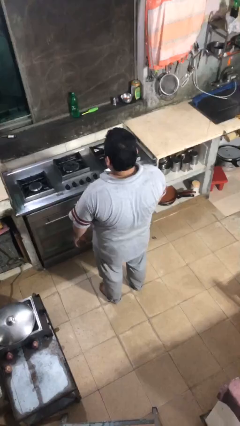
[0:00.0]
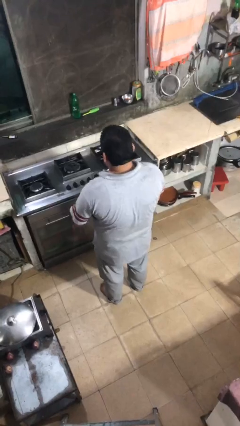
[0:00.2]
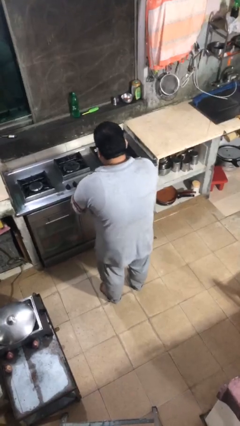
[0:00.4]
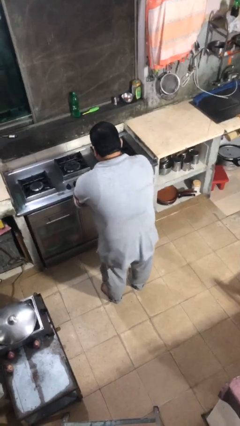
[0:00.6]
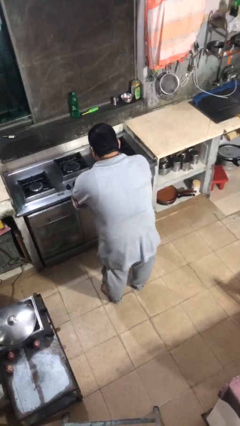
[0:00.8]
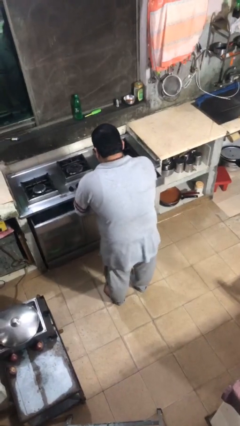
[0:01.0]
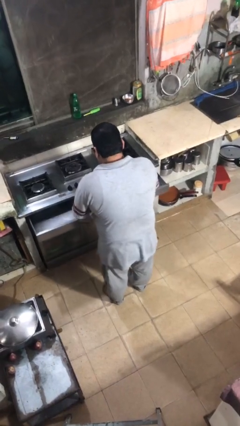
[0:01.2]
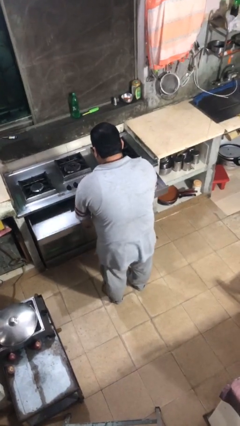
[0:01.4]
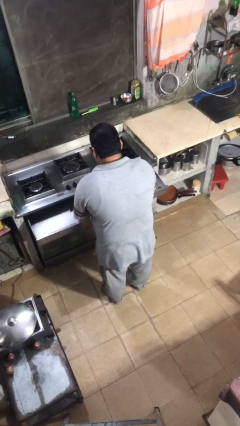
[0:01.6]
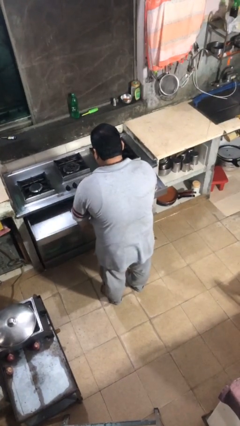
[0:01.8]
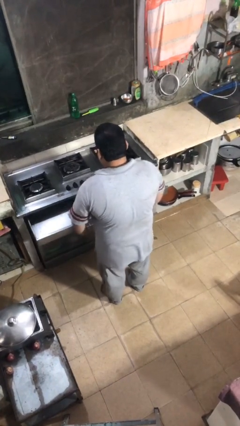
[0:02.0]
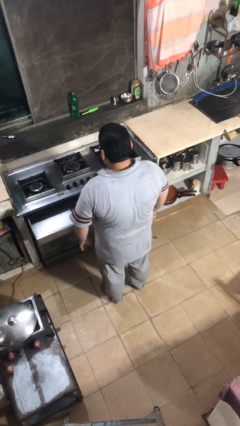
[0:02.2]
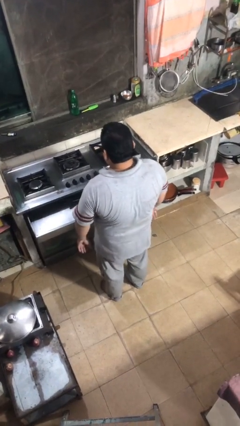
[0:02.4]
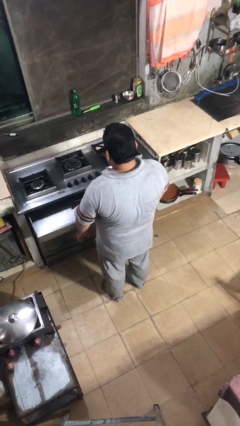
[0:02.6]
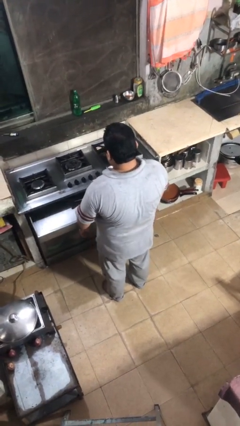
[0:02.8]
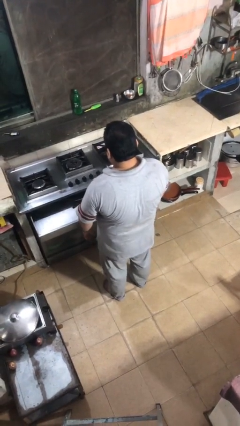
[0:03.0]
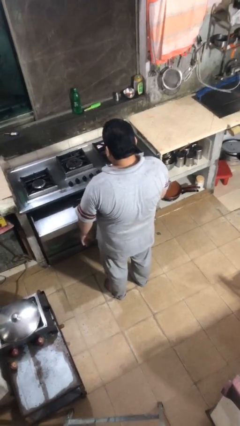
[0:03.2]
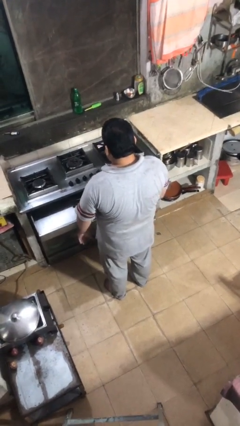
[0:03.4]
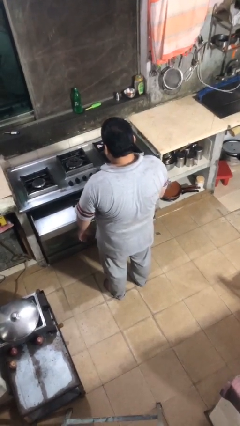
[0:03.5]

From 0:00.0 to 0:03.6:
person opens kitchen drawer

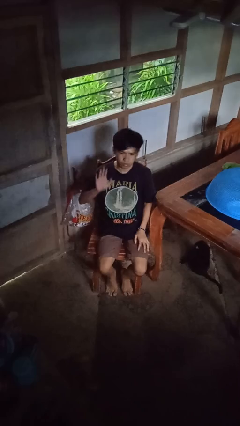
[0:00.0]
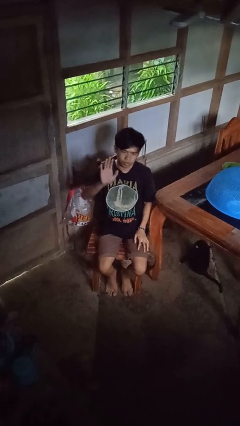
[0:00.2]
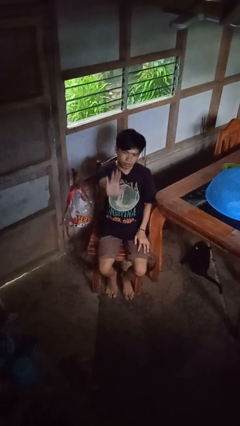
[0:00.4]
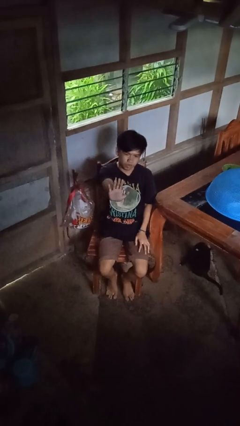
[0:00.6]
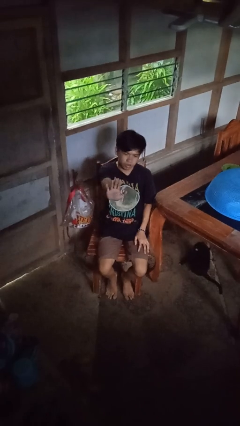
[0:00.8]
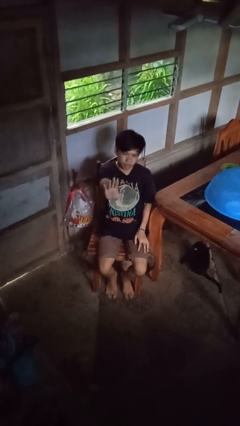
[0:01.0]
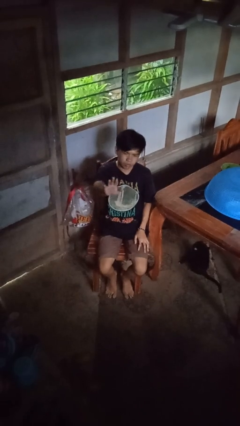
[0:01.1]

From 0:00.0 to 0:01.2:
person gestures stop

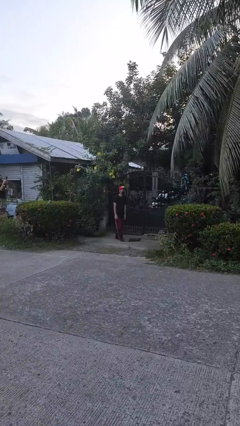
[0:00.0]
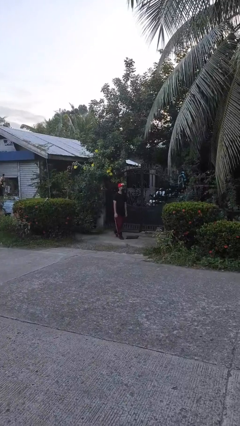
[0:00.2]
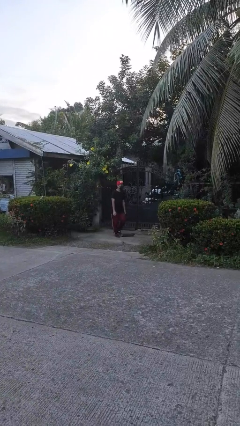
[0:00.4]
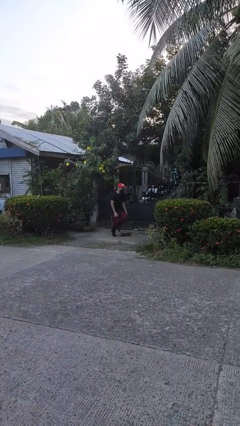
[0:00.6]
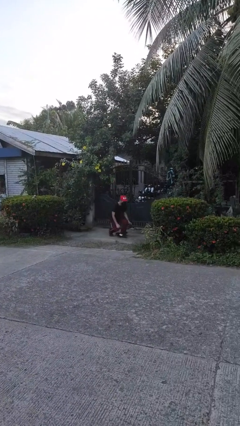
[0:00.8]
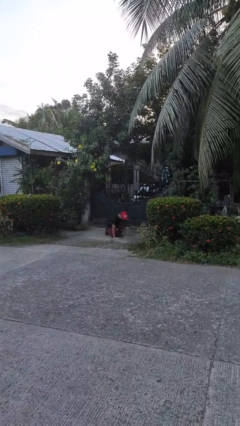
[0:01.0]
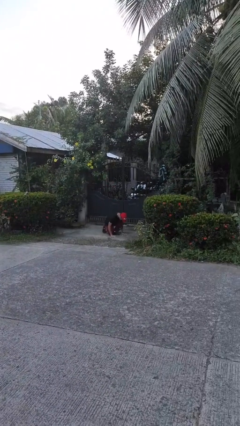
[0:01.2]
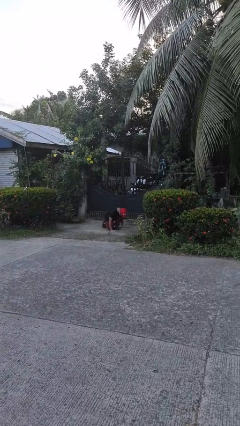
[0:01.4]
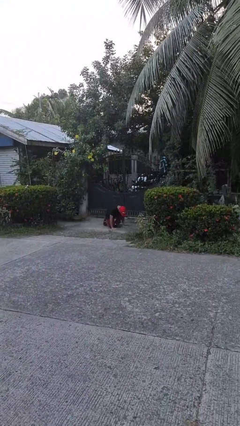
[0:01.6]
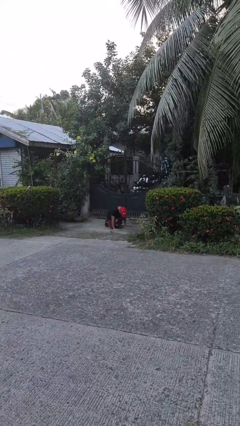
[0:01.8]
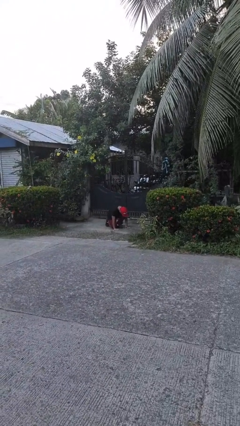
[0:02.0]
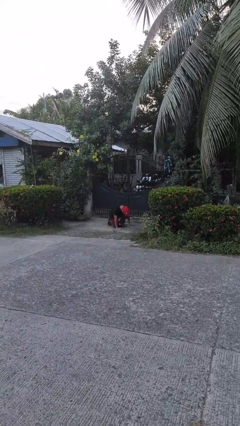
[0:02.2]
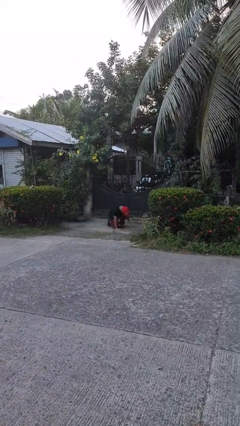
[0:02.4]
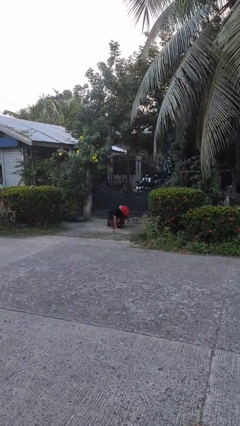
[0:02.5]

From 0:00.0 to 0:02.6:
person trips on object on floor

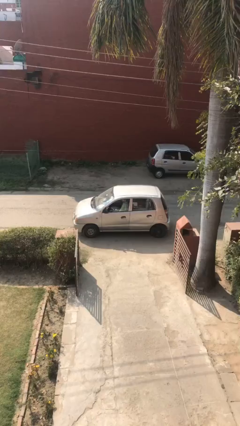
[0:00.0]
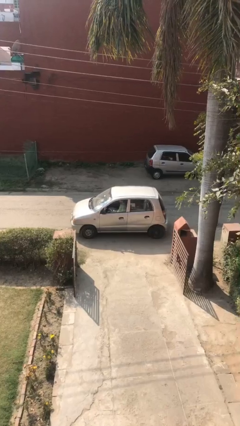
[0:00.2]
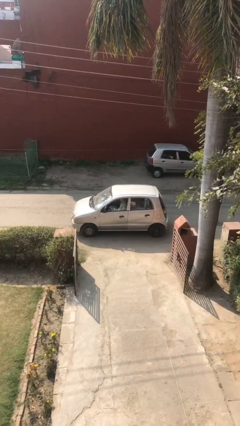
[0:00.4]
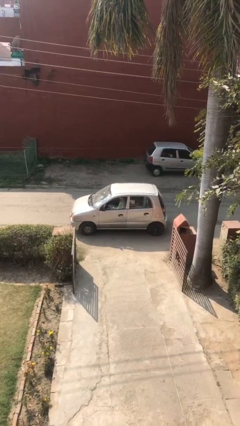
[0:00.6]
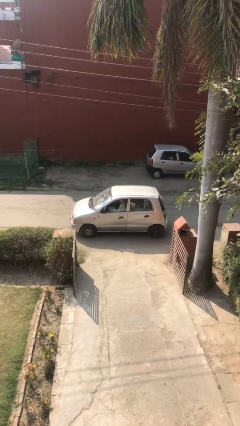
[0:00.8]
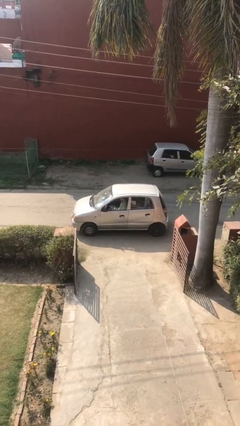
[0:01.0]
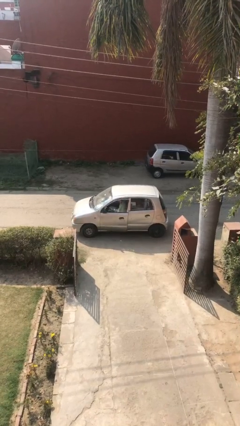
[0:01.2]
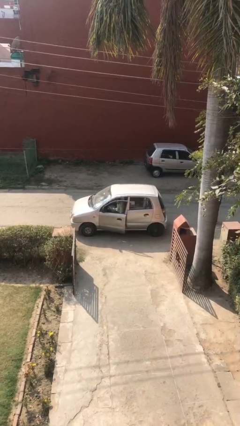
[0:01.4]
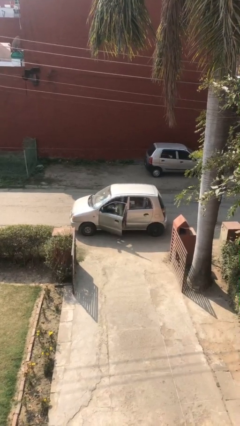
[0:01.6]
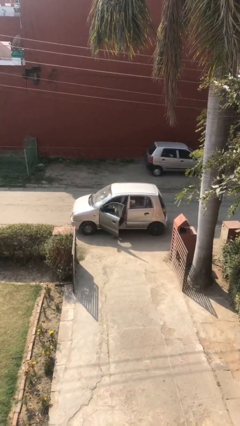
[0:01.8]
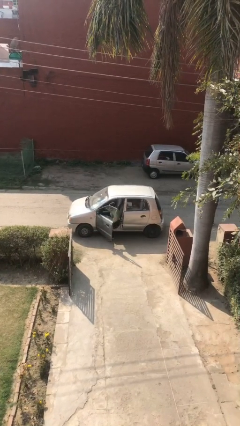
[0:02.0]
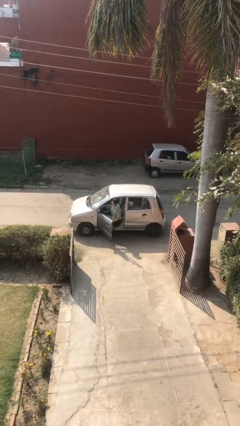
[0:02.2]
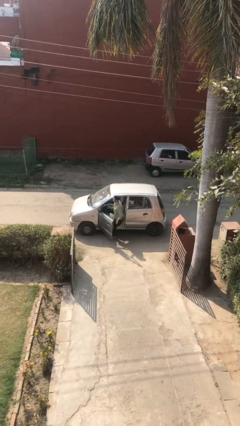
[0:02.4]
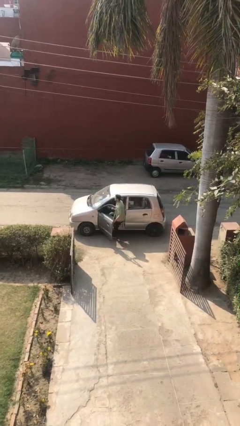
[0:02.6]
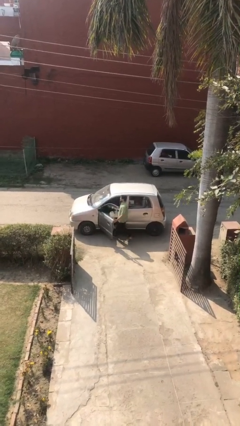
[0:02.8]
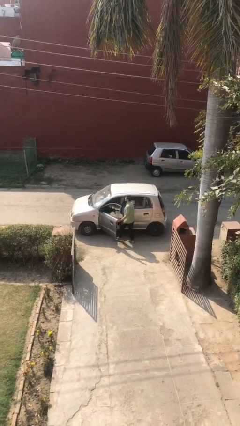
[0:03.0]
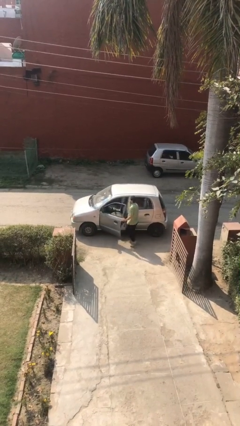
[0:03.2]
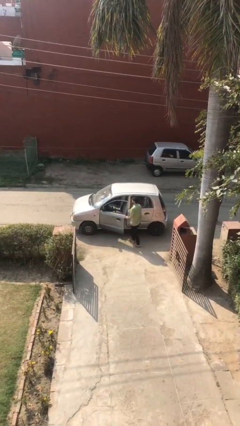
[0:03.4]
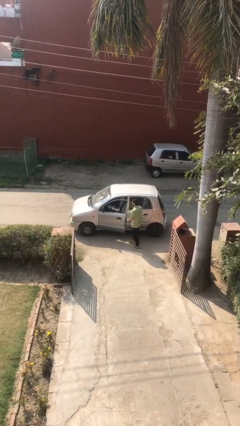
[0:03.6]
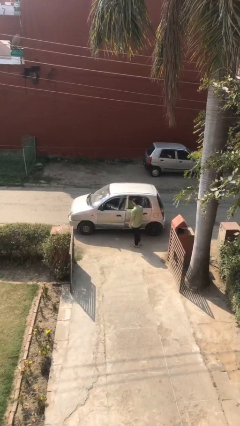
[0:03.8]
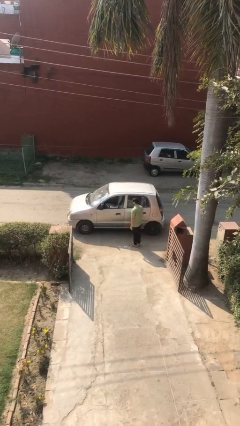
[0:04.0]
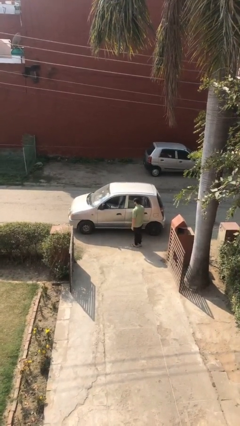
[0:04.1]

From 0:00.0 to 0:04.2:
car drops off person

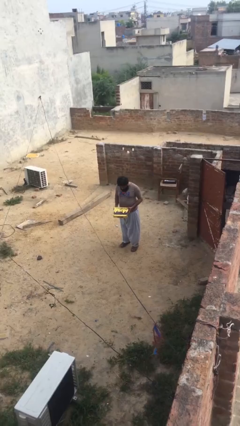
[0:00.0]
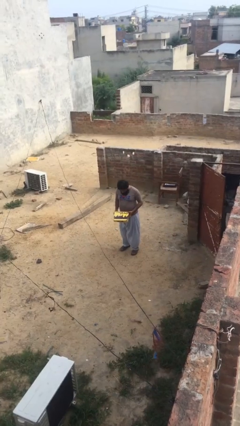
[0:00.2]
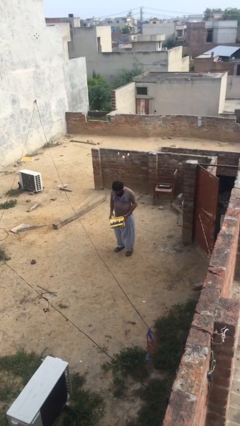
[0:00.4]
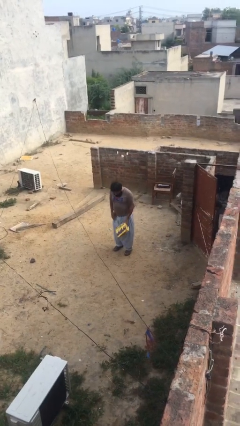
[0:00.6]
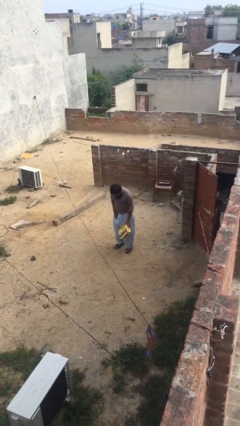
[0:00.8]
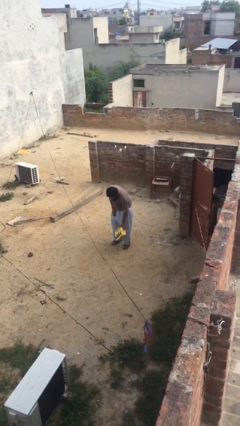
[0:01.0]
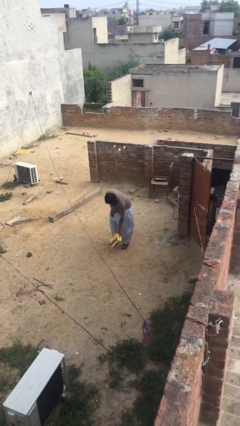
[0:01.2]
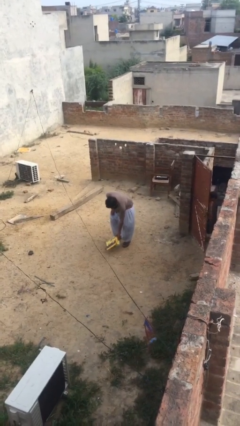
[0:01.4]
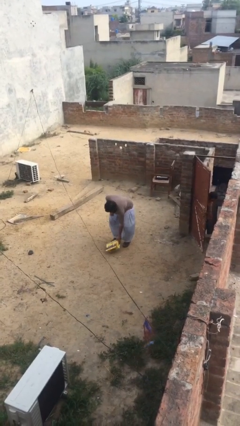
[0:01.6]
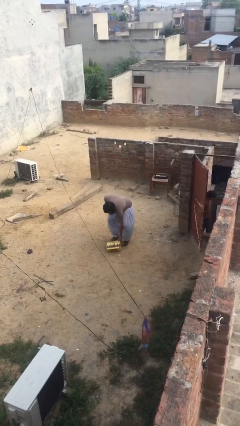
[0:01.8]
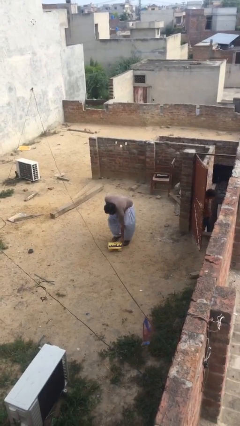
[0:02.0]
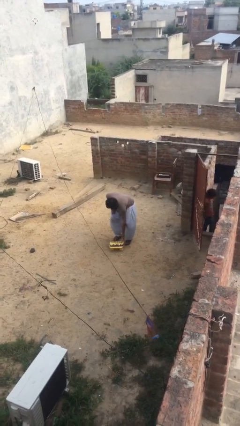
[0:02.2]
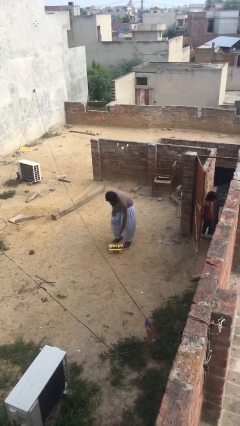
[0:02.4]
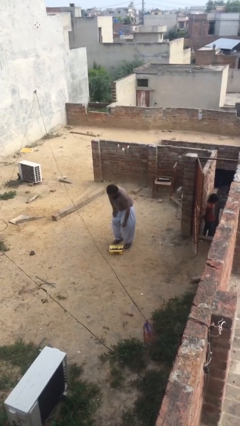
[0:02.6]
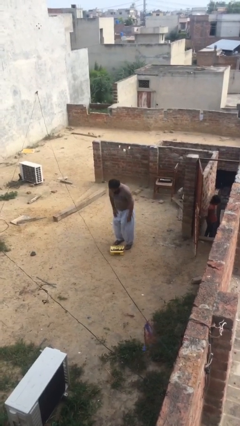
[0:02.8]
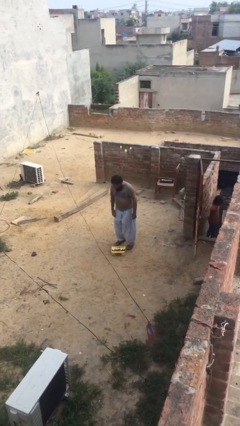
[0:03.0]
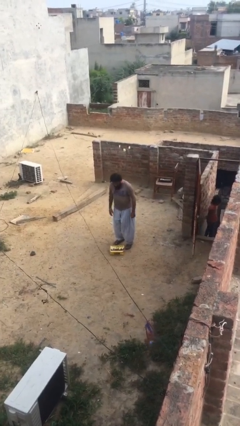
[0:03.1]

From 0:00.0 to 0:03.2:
person puts down object on floor

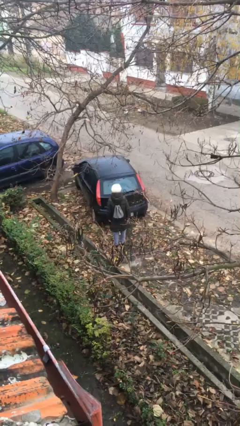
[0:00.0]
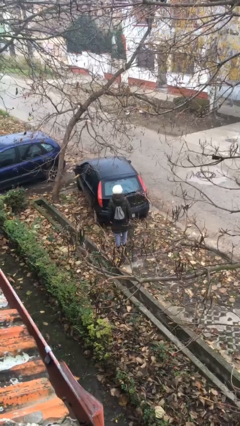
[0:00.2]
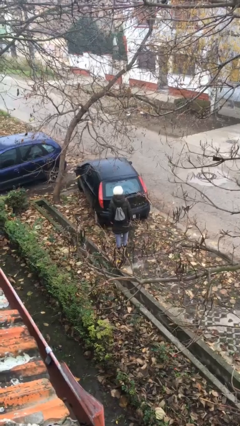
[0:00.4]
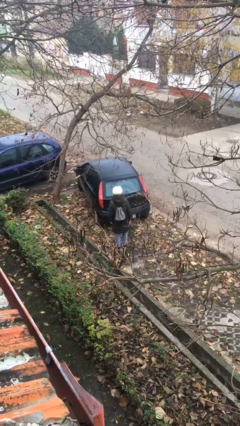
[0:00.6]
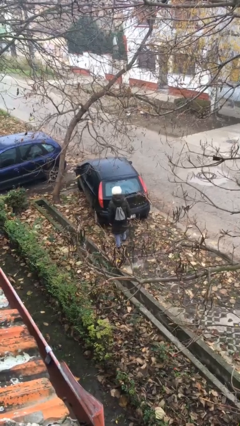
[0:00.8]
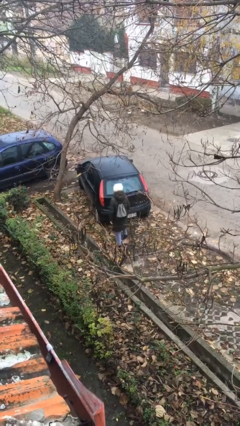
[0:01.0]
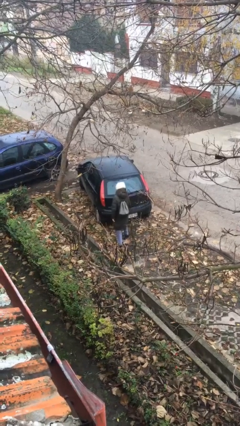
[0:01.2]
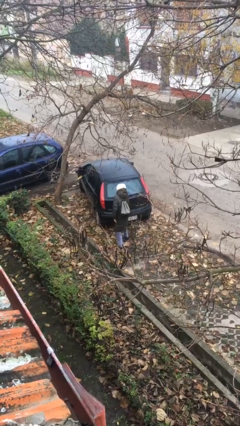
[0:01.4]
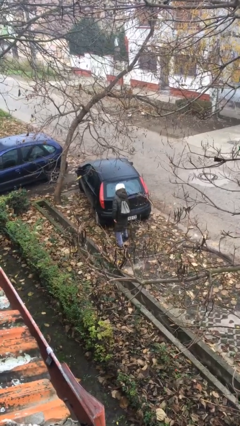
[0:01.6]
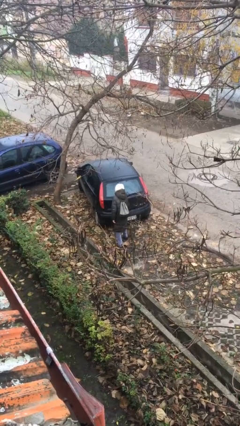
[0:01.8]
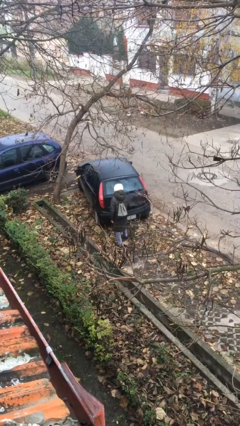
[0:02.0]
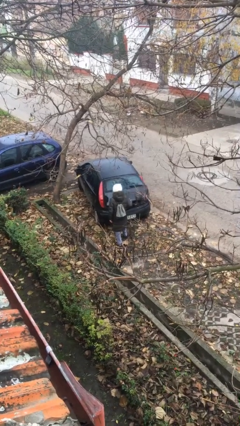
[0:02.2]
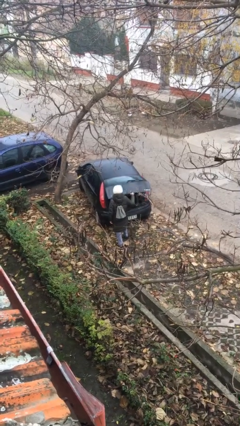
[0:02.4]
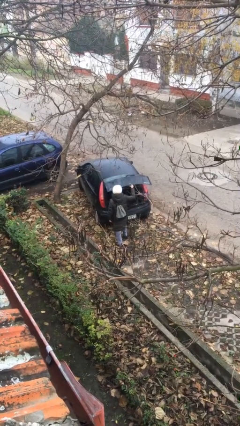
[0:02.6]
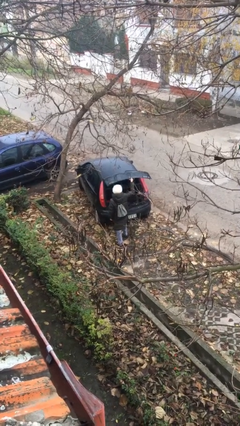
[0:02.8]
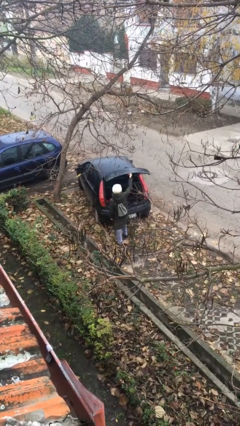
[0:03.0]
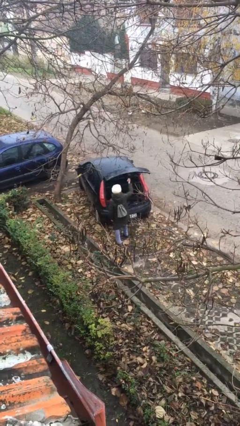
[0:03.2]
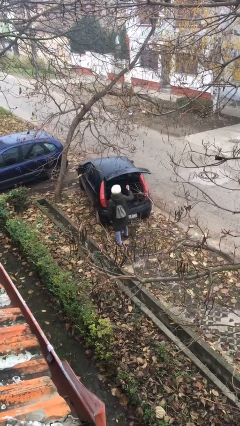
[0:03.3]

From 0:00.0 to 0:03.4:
person opens car trunk
